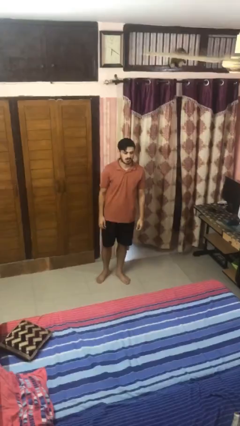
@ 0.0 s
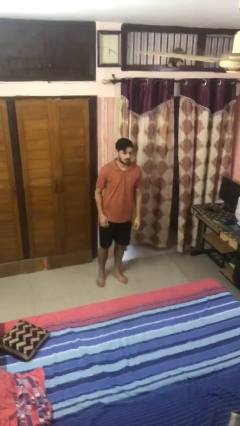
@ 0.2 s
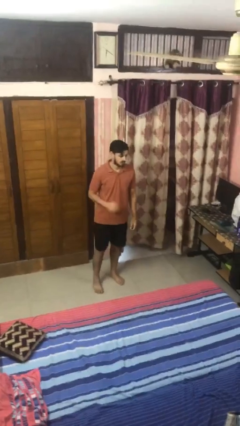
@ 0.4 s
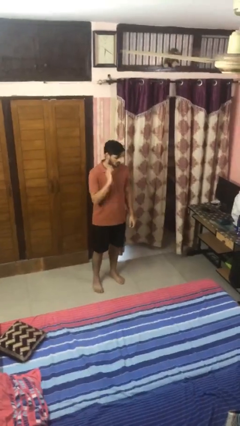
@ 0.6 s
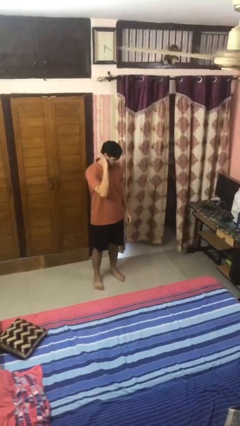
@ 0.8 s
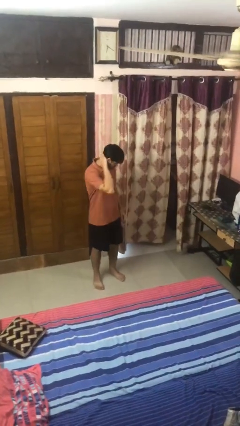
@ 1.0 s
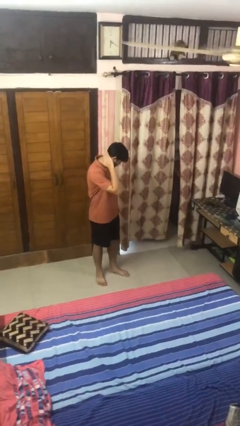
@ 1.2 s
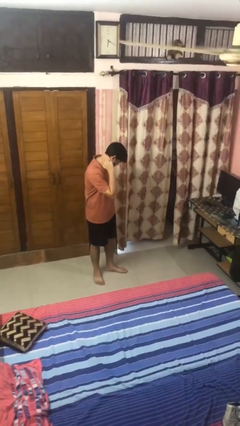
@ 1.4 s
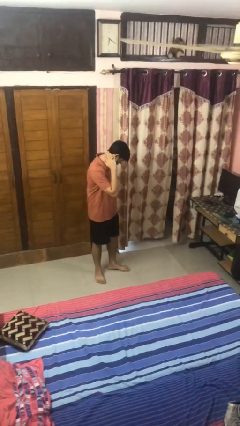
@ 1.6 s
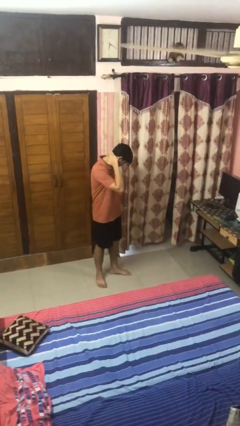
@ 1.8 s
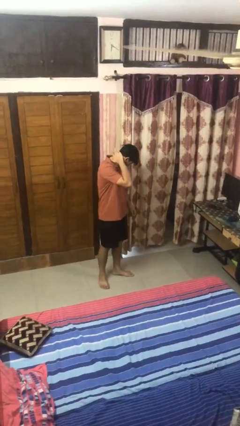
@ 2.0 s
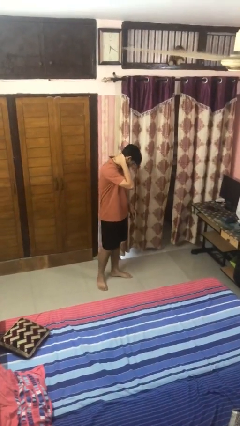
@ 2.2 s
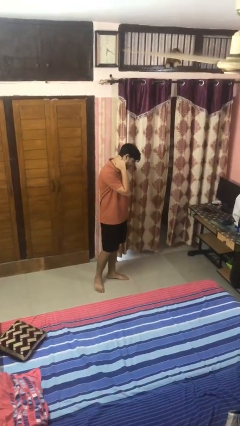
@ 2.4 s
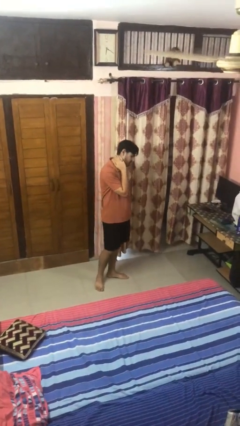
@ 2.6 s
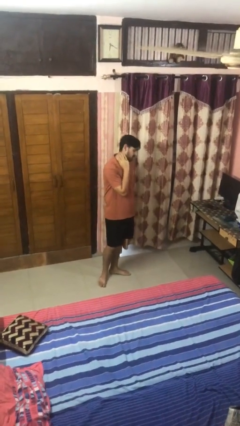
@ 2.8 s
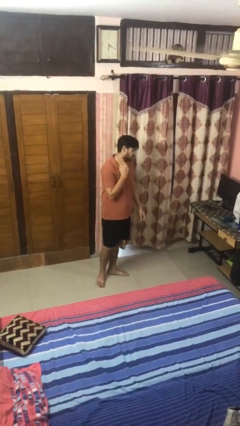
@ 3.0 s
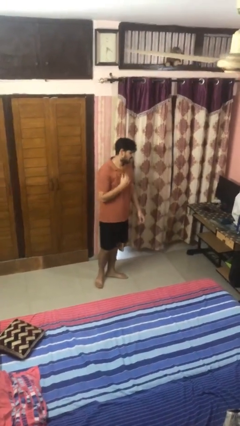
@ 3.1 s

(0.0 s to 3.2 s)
person rubs neck

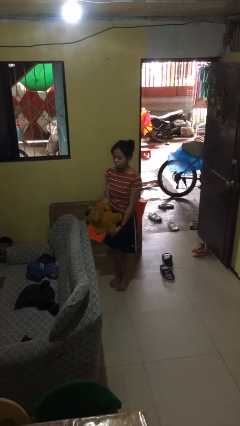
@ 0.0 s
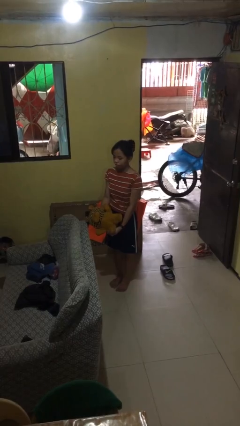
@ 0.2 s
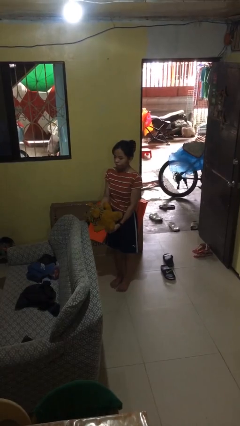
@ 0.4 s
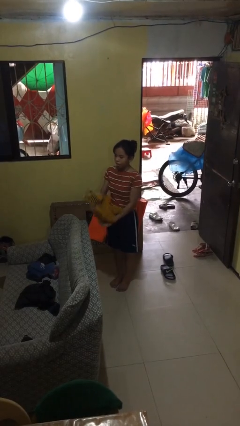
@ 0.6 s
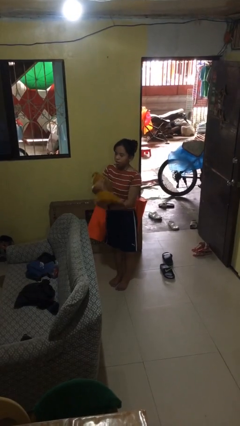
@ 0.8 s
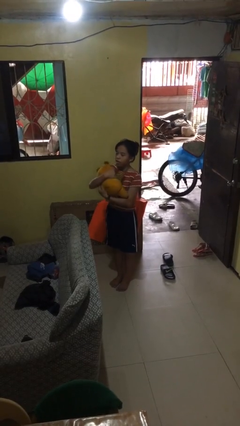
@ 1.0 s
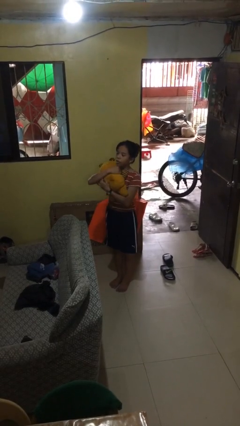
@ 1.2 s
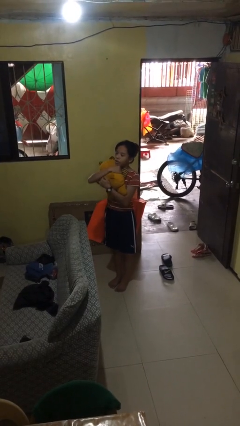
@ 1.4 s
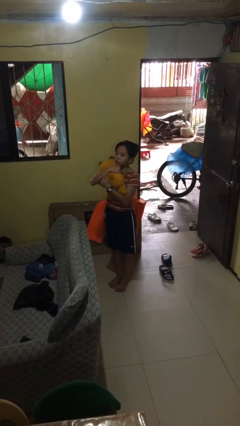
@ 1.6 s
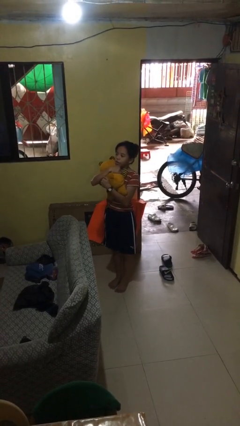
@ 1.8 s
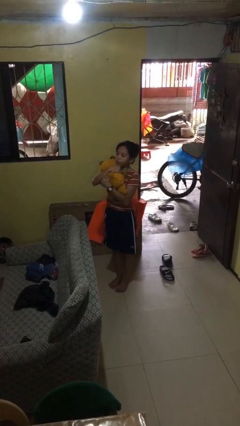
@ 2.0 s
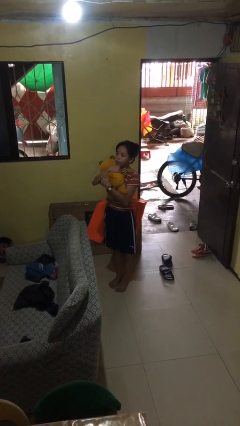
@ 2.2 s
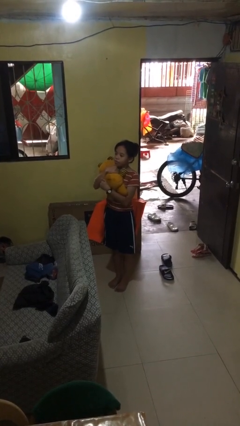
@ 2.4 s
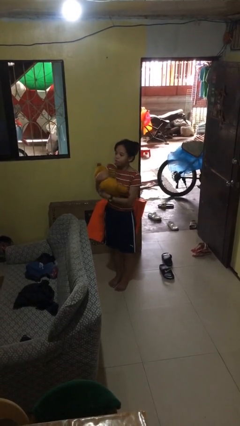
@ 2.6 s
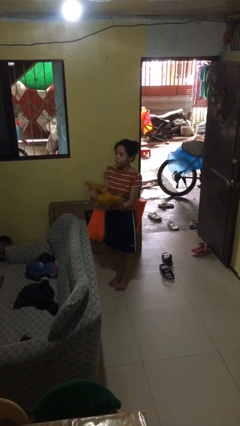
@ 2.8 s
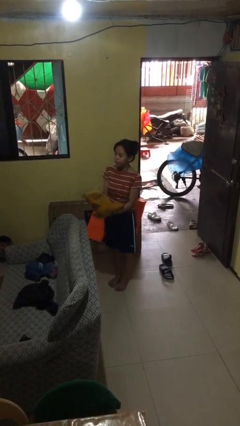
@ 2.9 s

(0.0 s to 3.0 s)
person hugs stuffed animal

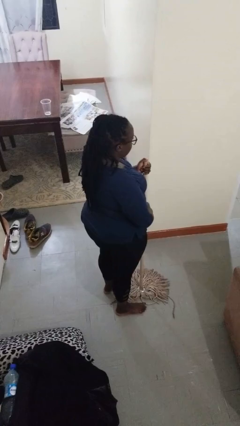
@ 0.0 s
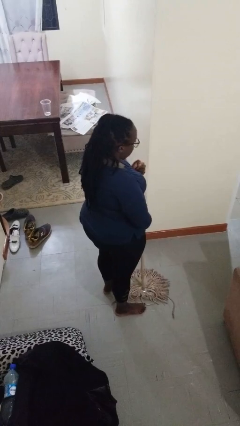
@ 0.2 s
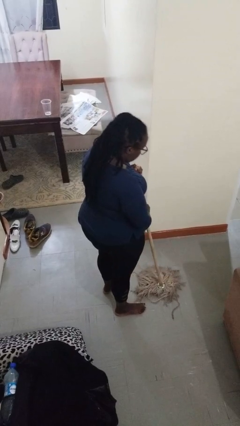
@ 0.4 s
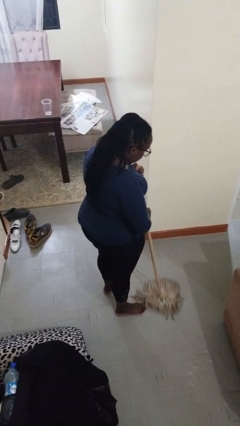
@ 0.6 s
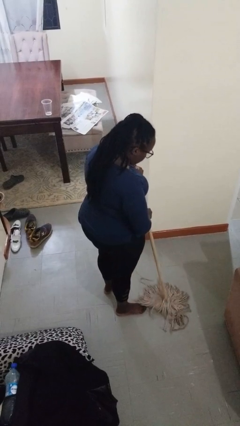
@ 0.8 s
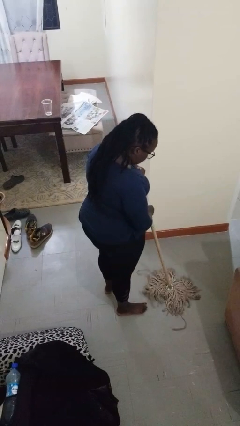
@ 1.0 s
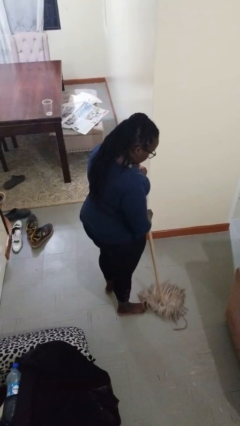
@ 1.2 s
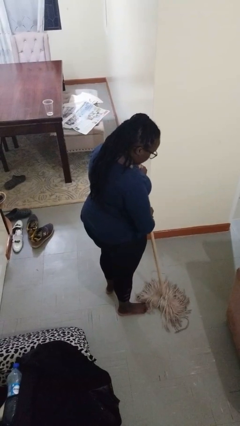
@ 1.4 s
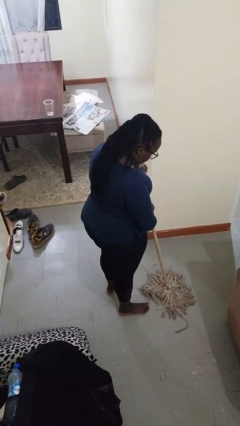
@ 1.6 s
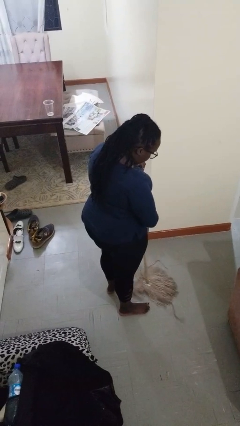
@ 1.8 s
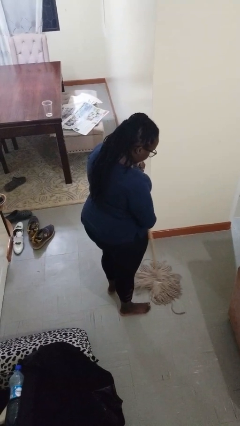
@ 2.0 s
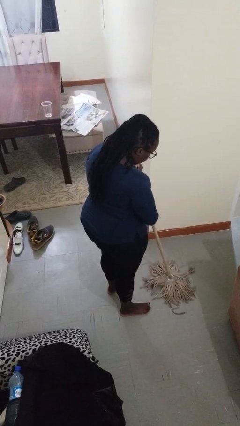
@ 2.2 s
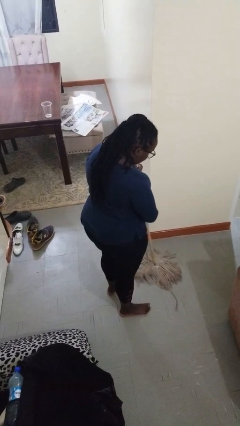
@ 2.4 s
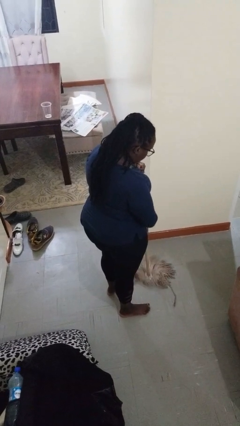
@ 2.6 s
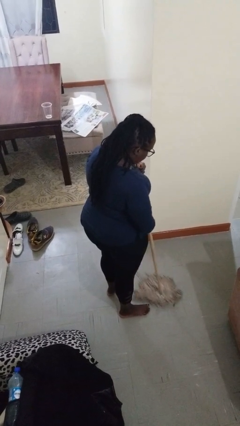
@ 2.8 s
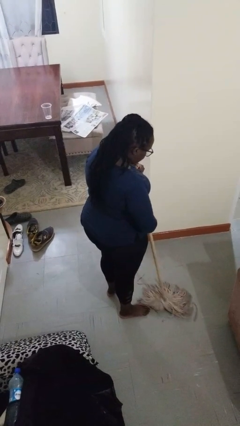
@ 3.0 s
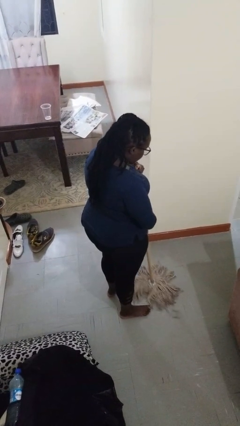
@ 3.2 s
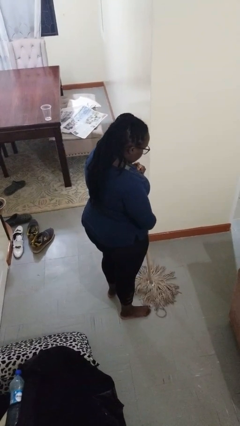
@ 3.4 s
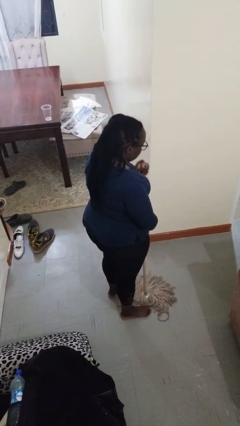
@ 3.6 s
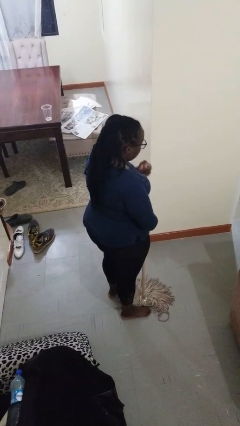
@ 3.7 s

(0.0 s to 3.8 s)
person mops

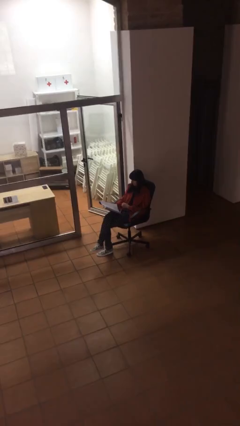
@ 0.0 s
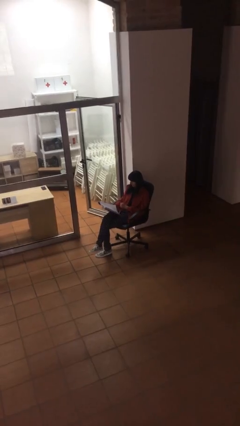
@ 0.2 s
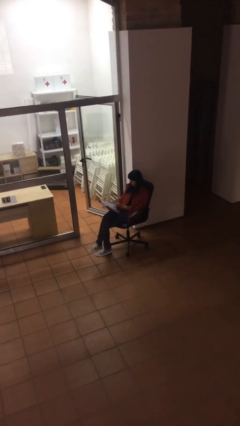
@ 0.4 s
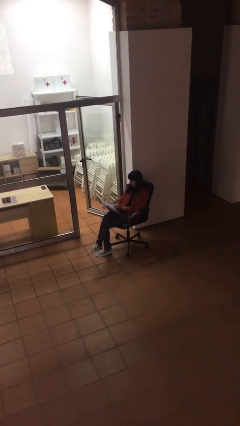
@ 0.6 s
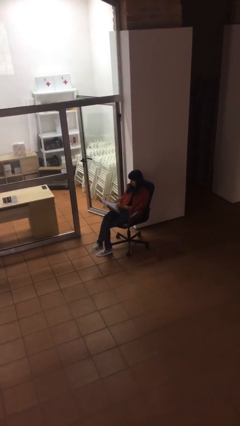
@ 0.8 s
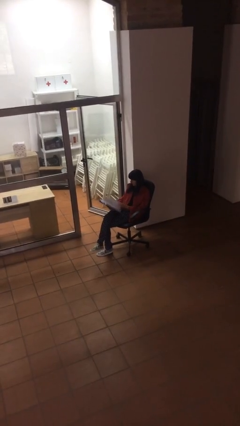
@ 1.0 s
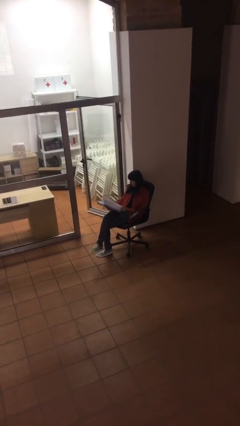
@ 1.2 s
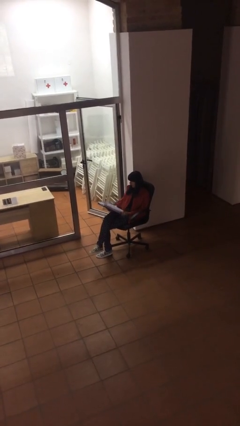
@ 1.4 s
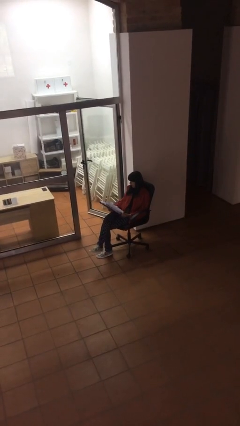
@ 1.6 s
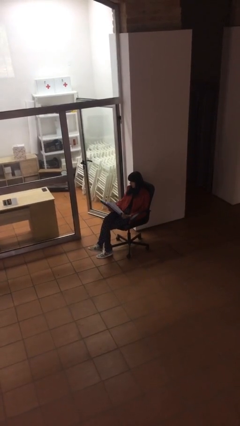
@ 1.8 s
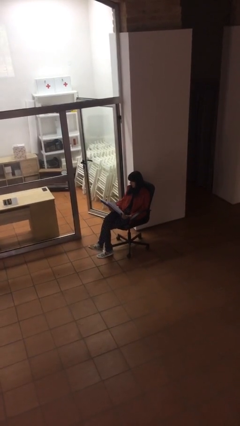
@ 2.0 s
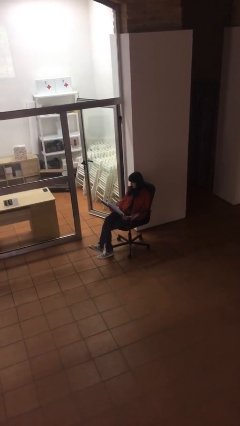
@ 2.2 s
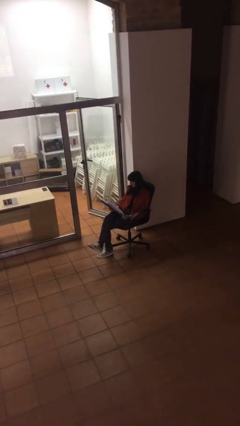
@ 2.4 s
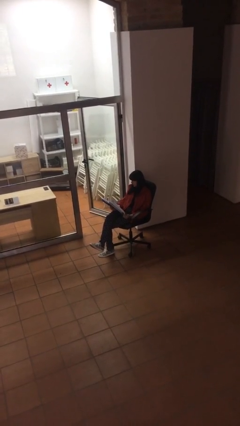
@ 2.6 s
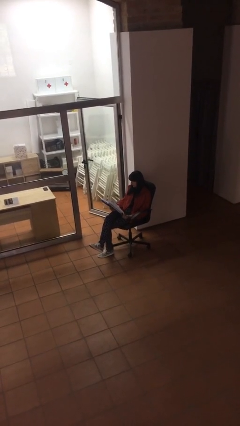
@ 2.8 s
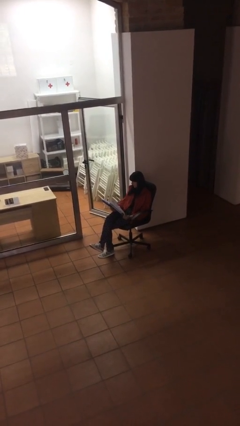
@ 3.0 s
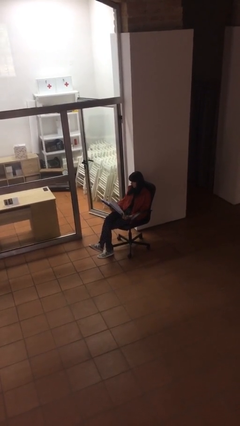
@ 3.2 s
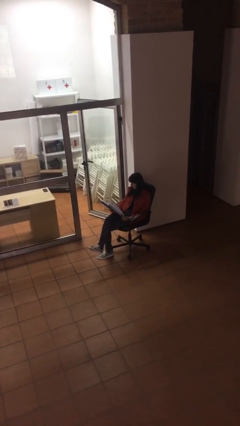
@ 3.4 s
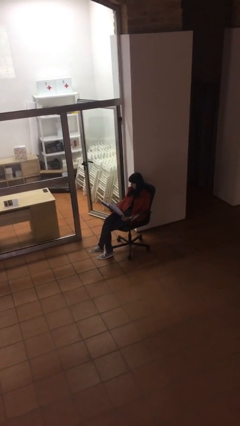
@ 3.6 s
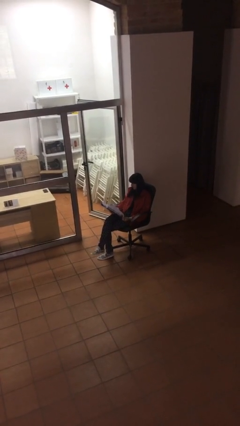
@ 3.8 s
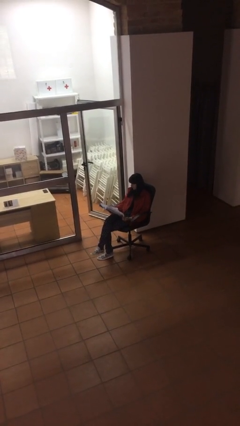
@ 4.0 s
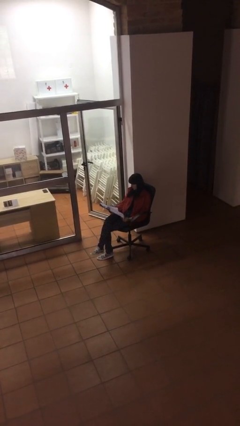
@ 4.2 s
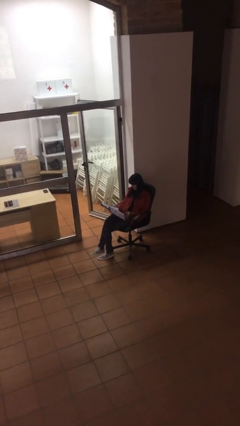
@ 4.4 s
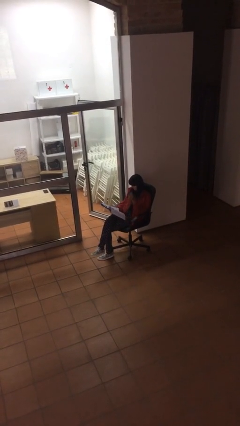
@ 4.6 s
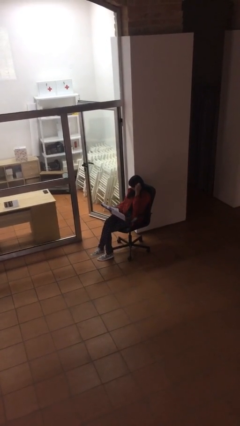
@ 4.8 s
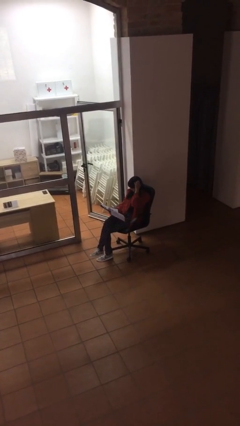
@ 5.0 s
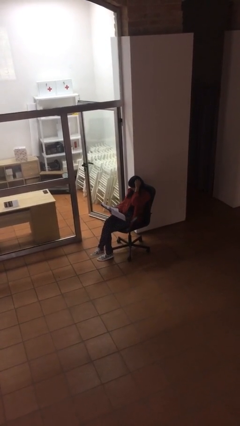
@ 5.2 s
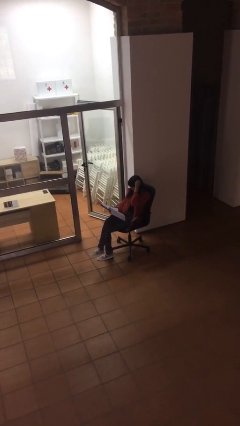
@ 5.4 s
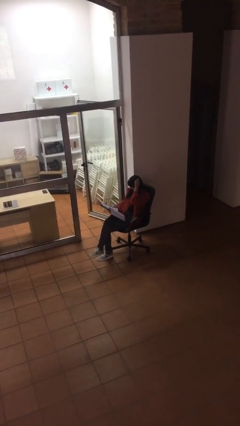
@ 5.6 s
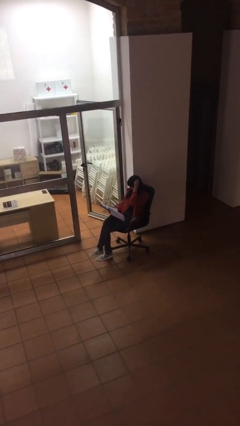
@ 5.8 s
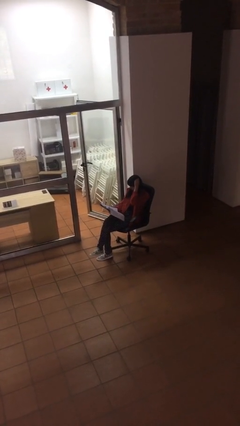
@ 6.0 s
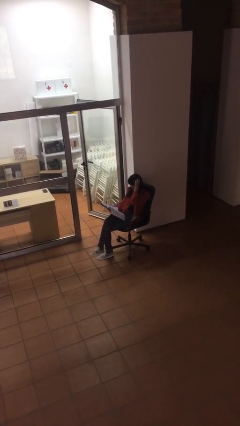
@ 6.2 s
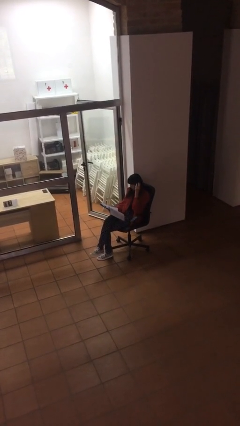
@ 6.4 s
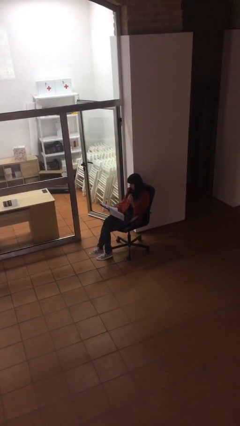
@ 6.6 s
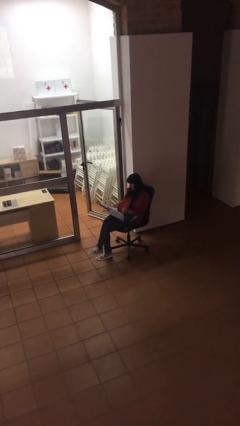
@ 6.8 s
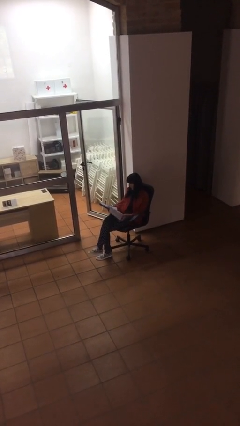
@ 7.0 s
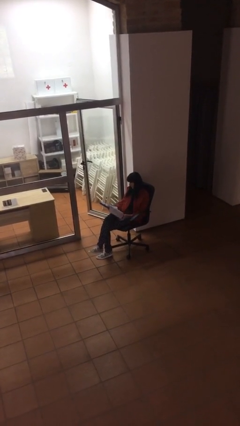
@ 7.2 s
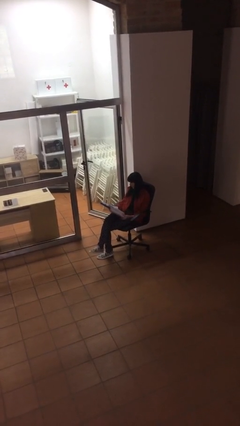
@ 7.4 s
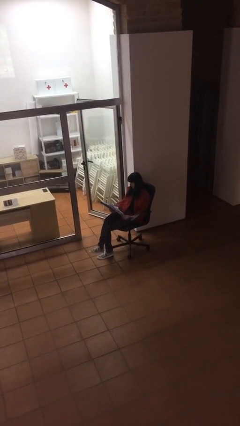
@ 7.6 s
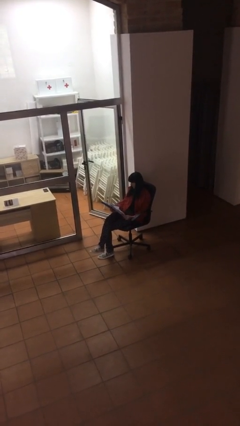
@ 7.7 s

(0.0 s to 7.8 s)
person reads document
